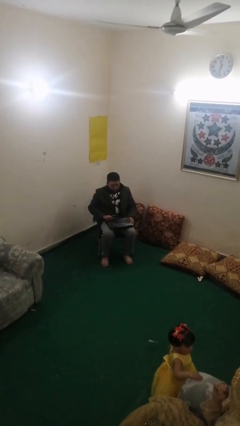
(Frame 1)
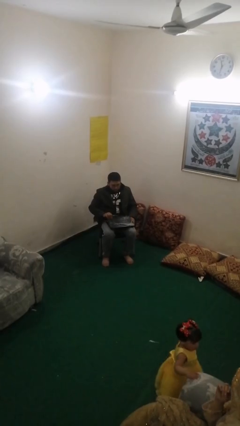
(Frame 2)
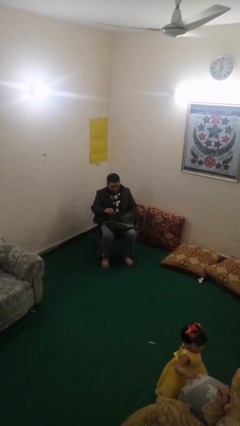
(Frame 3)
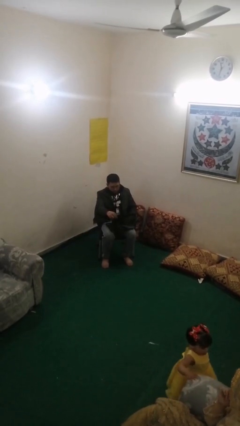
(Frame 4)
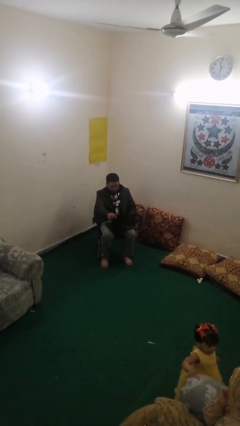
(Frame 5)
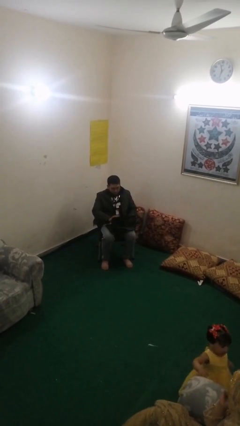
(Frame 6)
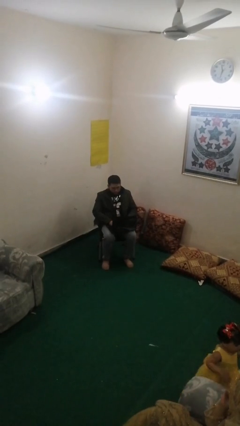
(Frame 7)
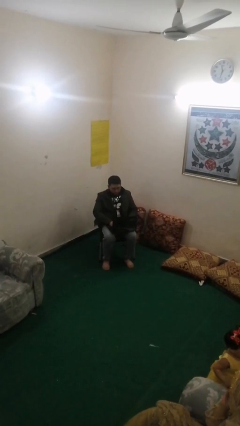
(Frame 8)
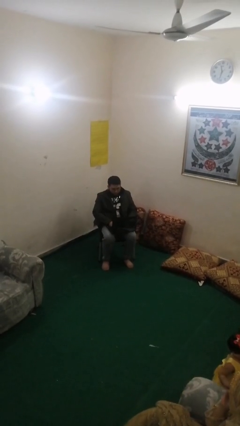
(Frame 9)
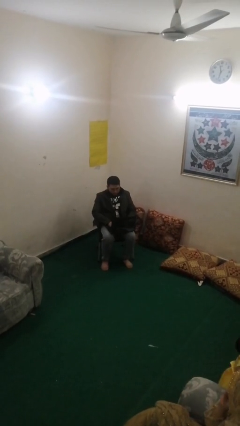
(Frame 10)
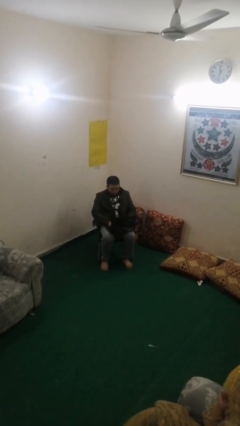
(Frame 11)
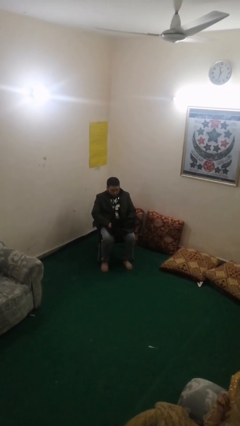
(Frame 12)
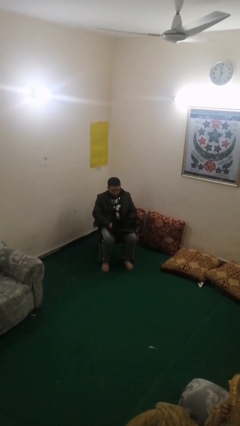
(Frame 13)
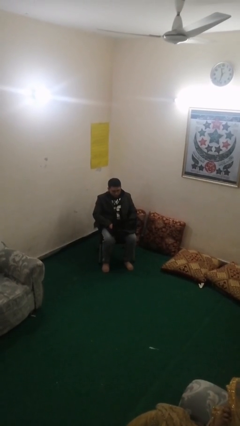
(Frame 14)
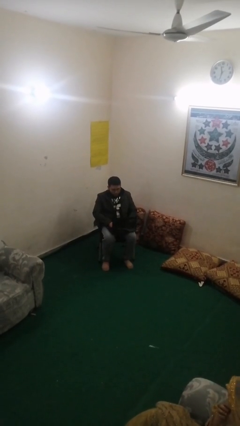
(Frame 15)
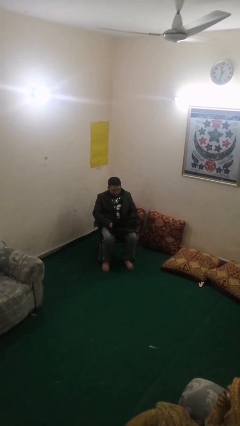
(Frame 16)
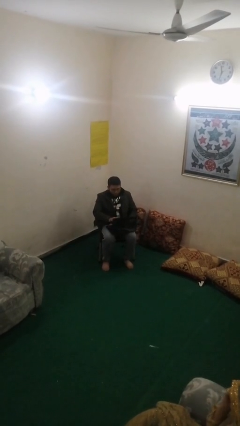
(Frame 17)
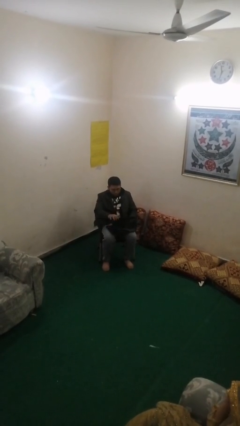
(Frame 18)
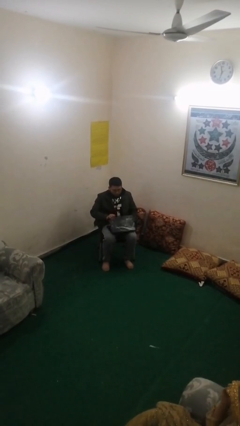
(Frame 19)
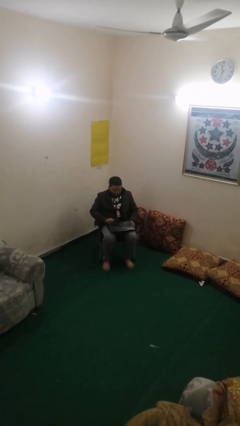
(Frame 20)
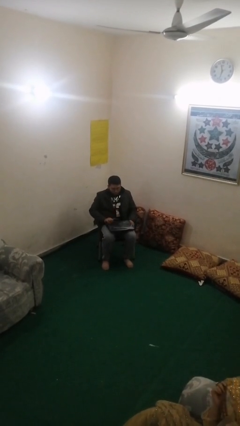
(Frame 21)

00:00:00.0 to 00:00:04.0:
person interacts with laptop

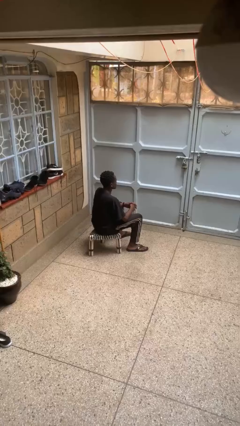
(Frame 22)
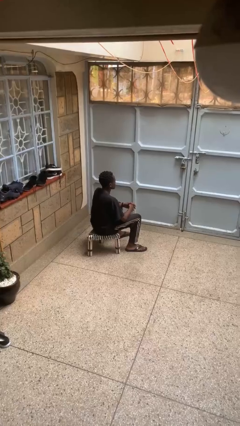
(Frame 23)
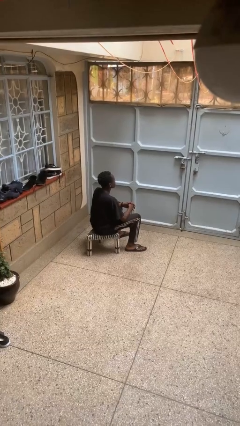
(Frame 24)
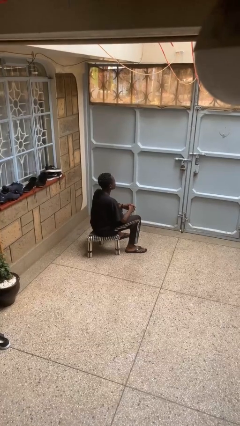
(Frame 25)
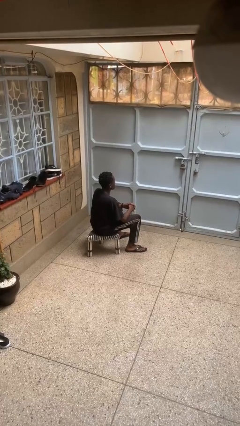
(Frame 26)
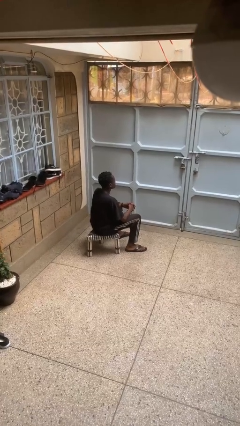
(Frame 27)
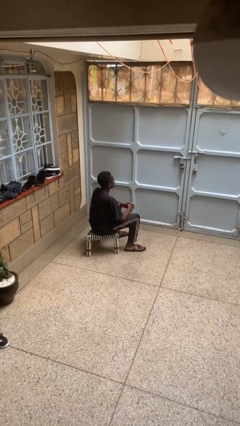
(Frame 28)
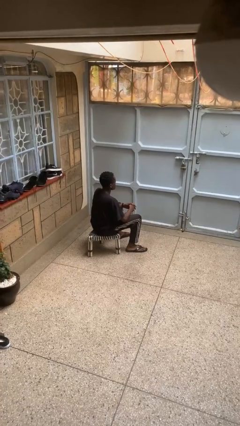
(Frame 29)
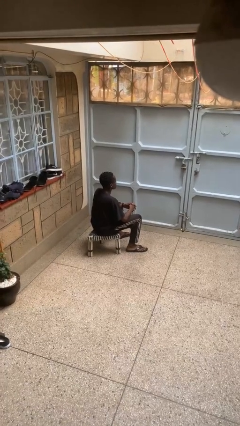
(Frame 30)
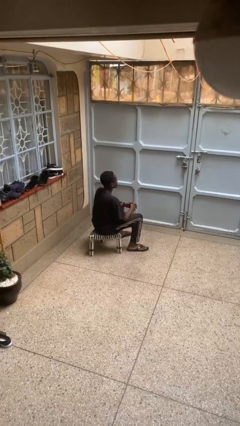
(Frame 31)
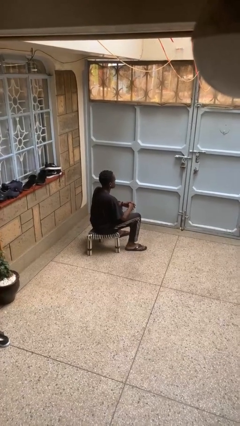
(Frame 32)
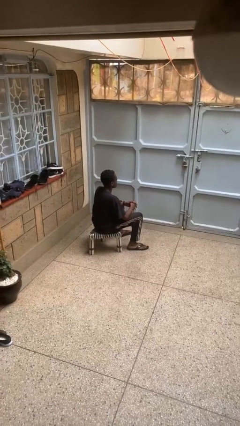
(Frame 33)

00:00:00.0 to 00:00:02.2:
person nods head

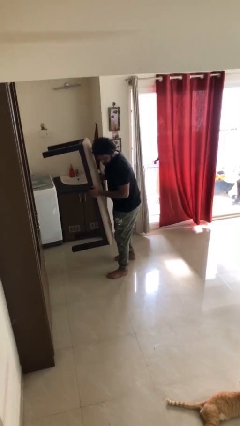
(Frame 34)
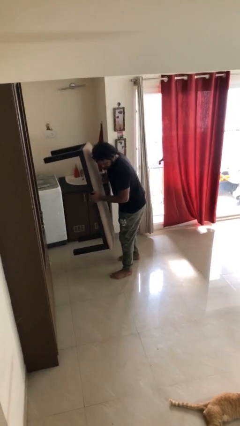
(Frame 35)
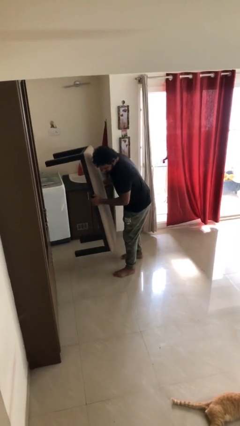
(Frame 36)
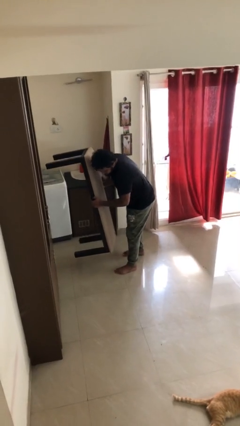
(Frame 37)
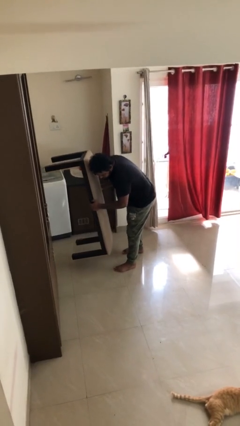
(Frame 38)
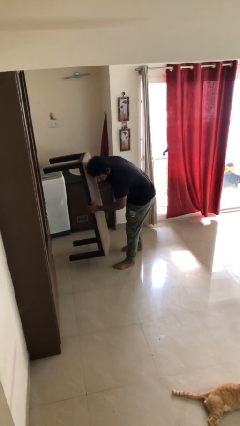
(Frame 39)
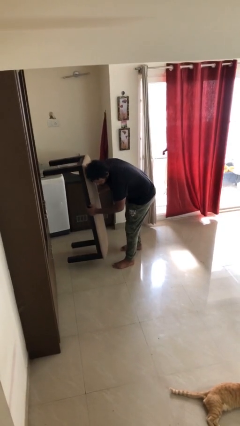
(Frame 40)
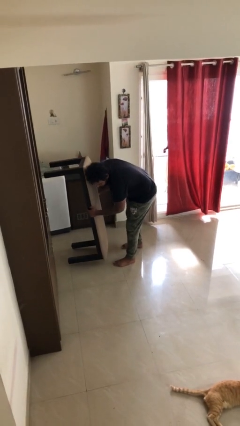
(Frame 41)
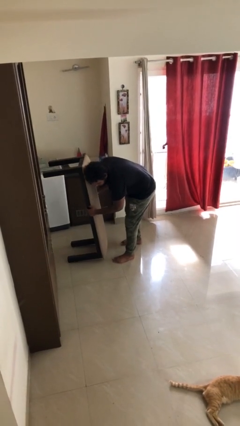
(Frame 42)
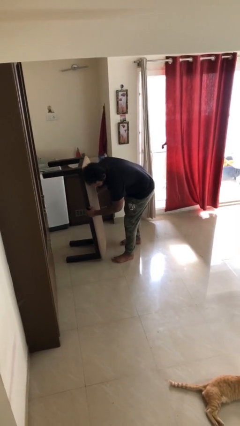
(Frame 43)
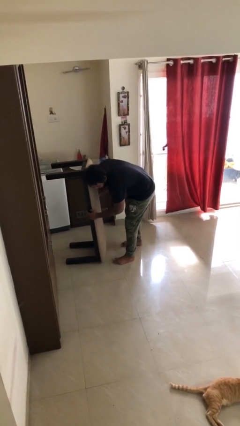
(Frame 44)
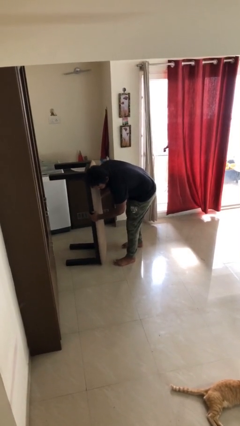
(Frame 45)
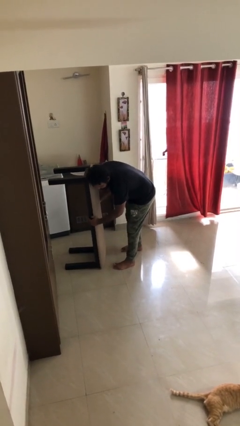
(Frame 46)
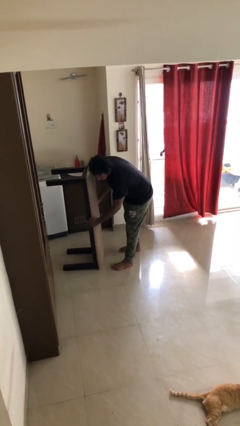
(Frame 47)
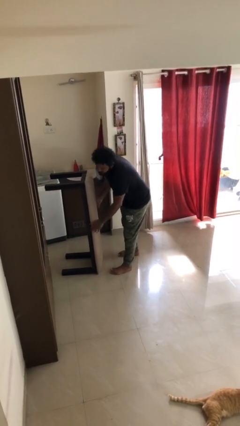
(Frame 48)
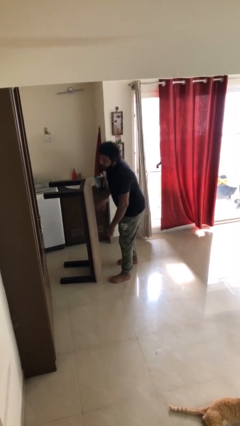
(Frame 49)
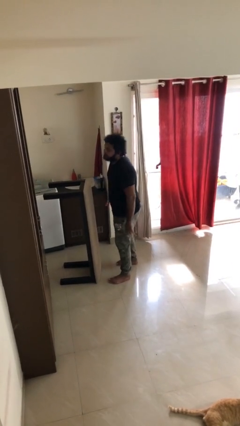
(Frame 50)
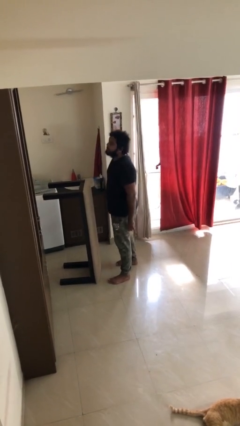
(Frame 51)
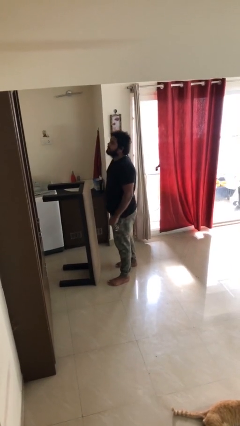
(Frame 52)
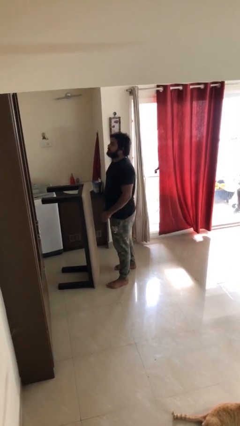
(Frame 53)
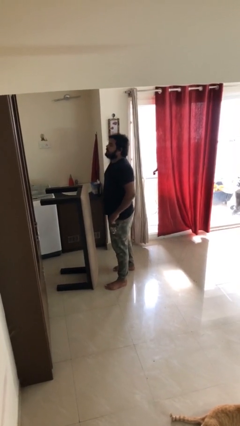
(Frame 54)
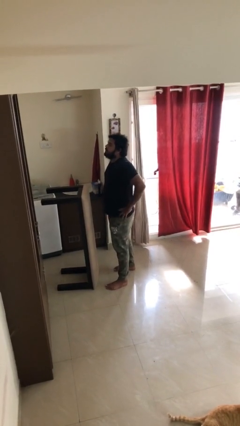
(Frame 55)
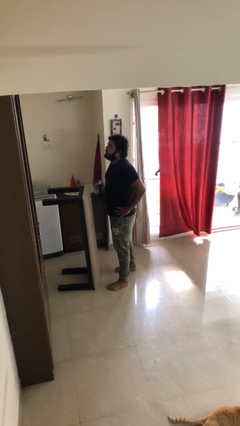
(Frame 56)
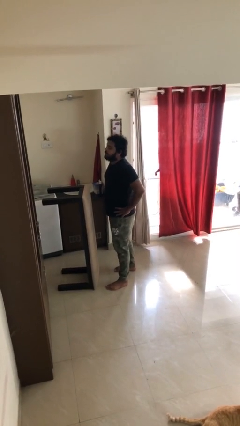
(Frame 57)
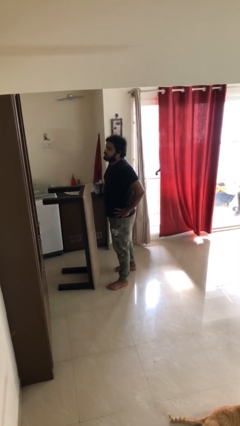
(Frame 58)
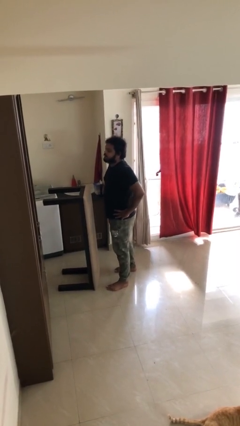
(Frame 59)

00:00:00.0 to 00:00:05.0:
person puts down object on floor

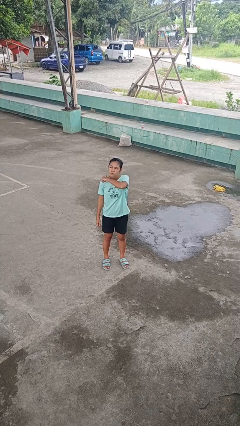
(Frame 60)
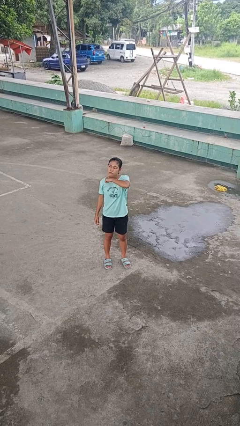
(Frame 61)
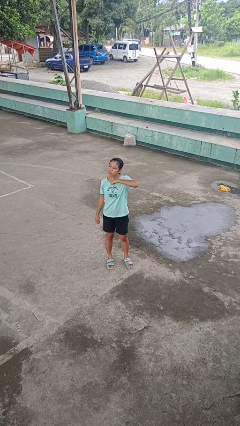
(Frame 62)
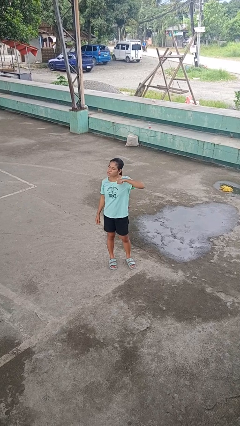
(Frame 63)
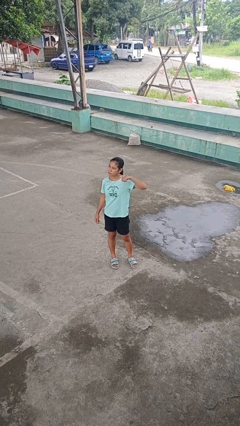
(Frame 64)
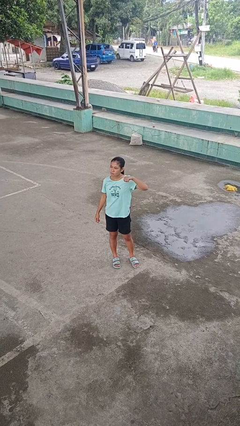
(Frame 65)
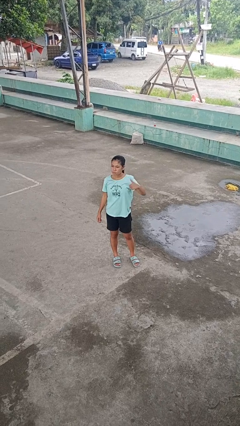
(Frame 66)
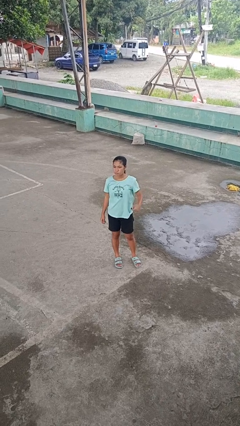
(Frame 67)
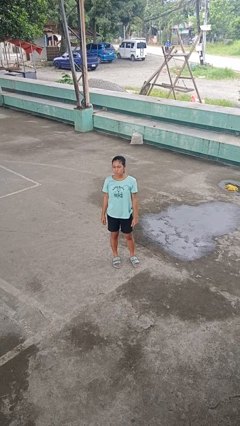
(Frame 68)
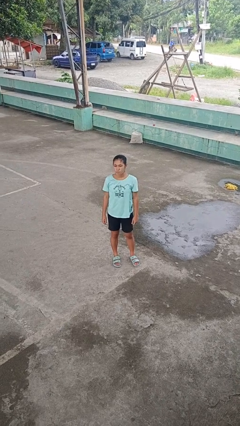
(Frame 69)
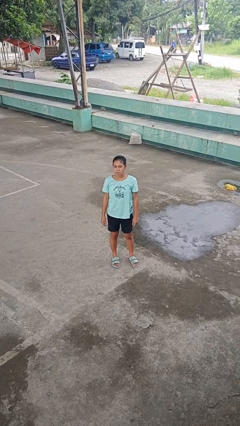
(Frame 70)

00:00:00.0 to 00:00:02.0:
person gestures cut

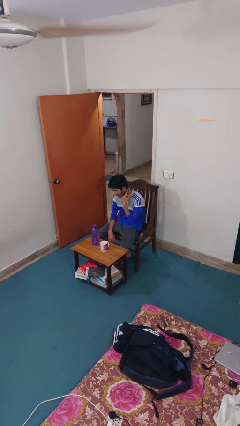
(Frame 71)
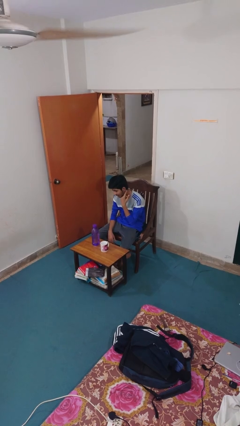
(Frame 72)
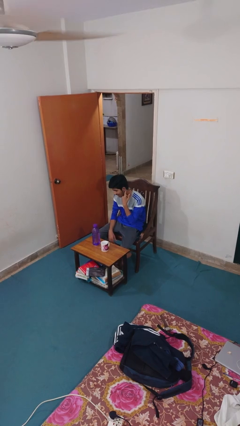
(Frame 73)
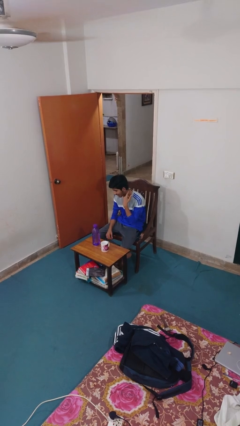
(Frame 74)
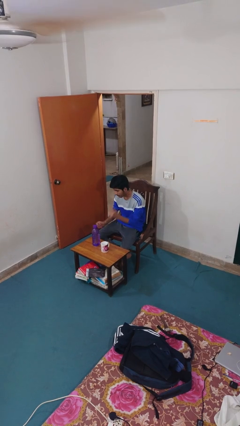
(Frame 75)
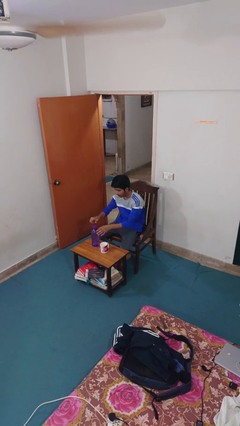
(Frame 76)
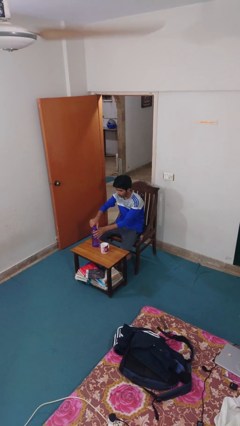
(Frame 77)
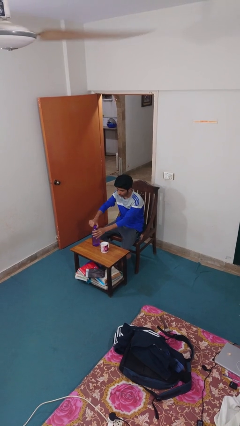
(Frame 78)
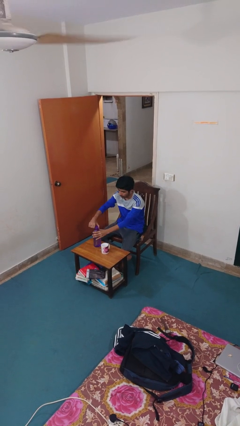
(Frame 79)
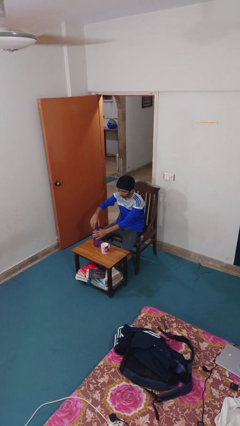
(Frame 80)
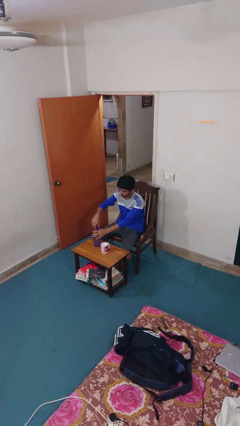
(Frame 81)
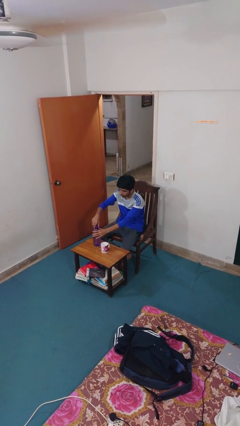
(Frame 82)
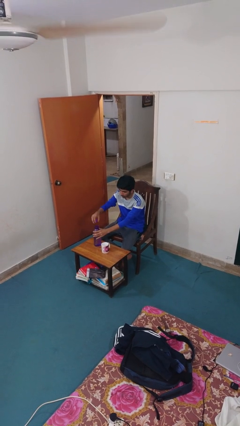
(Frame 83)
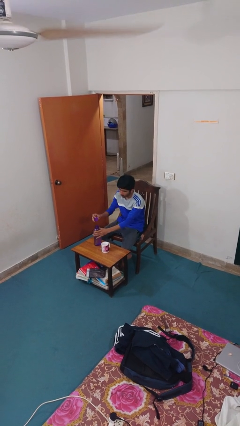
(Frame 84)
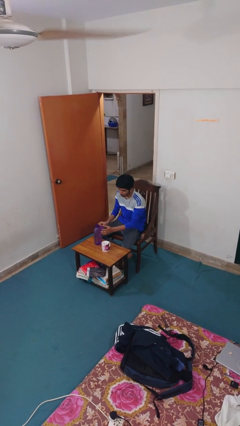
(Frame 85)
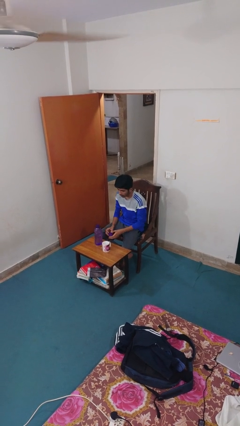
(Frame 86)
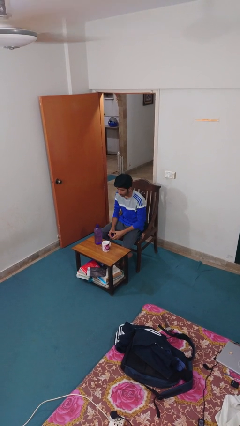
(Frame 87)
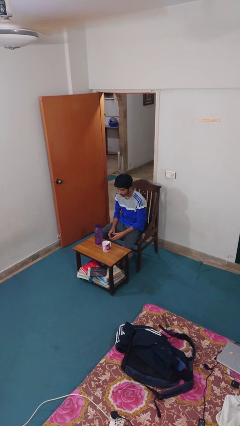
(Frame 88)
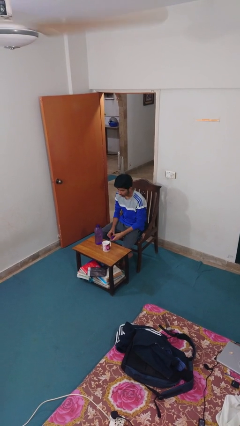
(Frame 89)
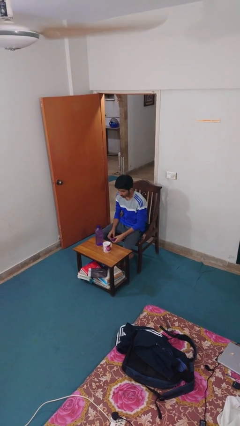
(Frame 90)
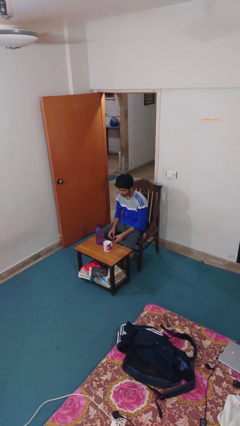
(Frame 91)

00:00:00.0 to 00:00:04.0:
person unscrews lid from bottle

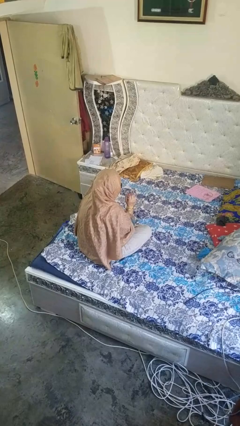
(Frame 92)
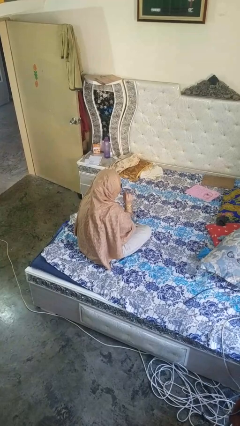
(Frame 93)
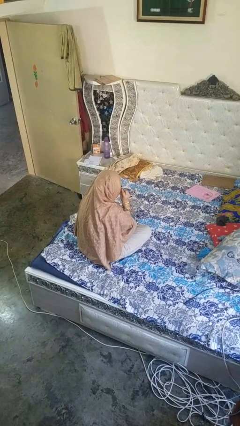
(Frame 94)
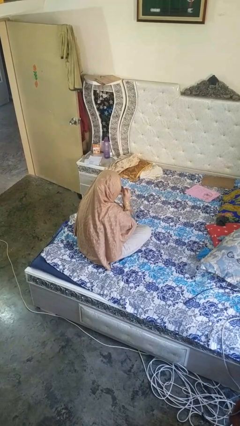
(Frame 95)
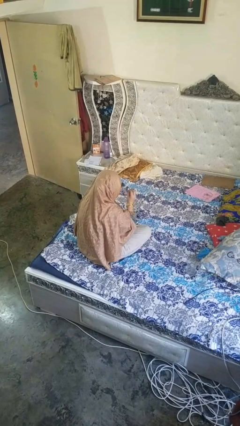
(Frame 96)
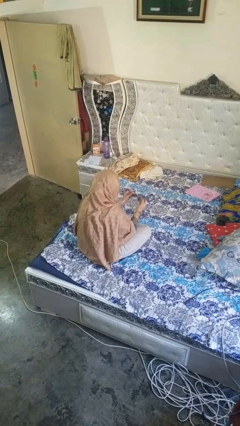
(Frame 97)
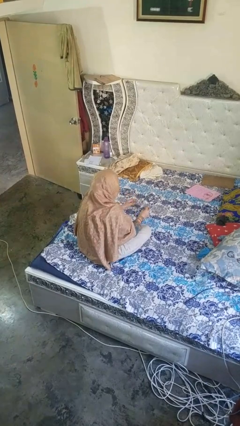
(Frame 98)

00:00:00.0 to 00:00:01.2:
person takes off glasses
